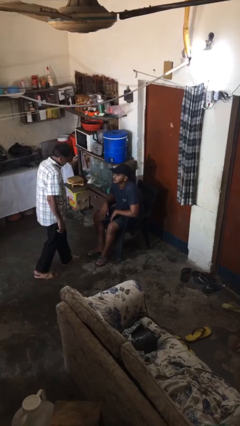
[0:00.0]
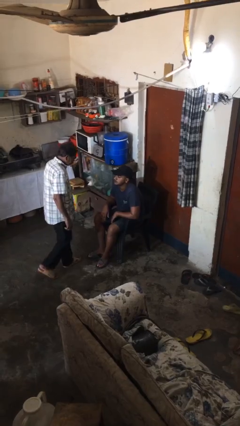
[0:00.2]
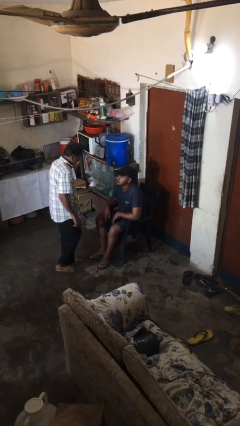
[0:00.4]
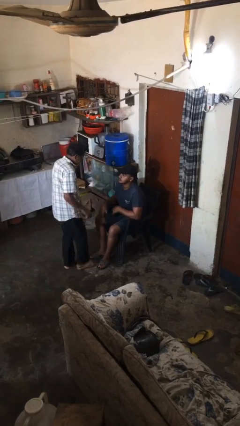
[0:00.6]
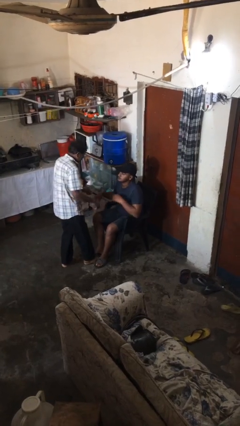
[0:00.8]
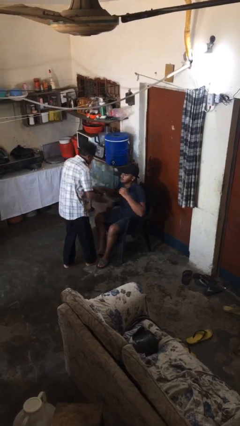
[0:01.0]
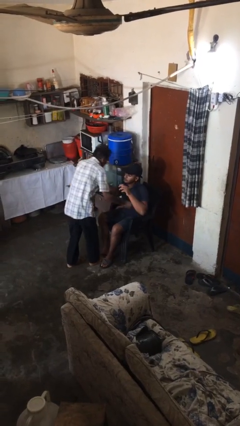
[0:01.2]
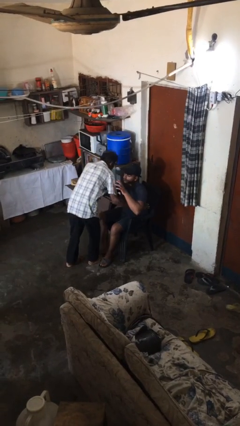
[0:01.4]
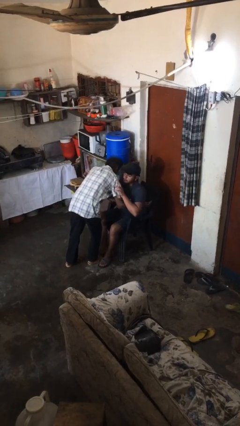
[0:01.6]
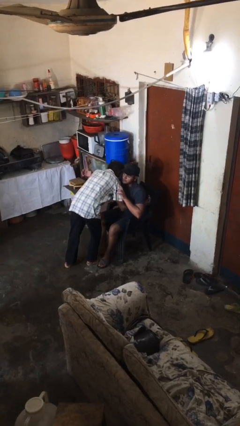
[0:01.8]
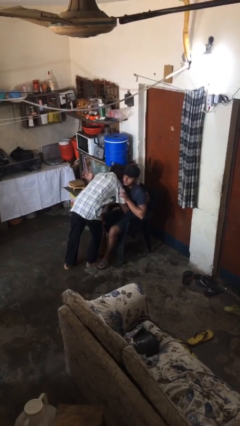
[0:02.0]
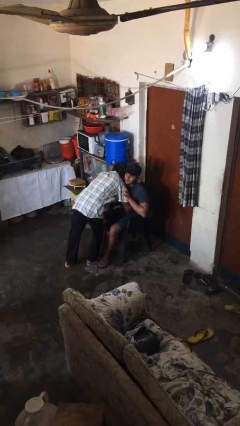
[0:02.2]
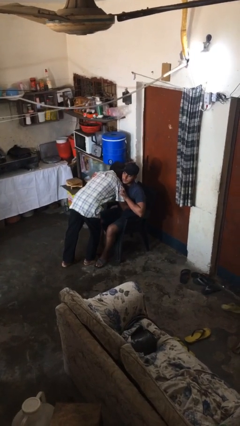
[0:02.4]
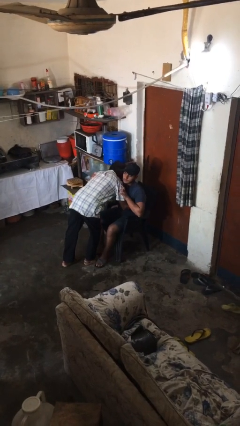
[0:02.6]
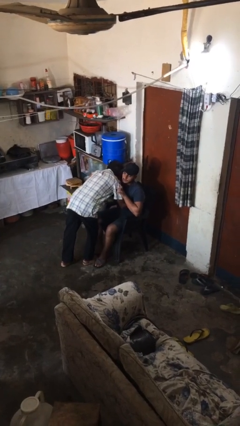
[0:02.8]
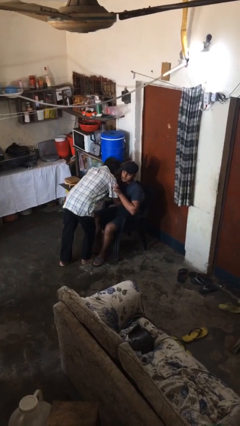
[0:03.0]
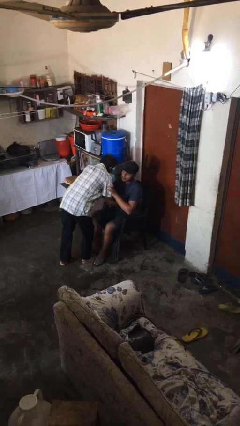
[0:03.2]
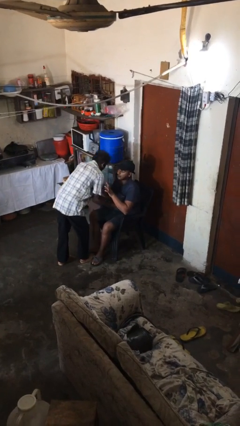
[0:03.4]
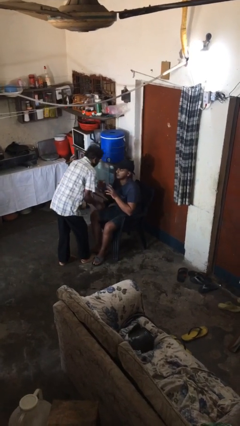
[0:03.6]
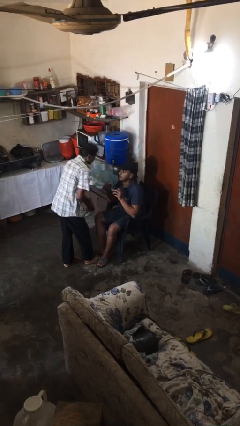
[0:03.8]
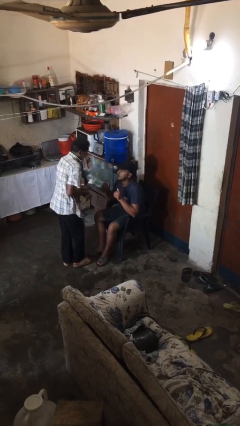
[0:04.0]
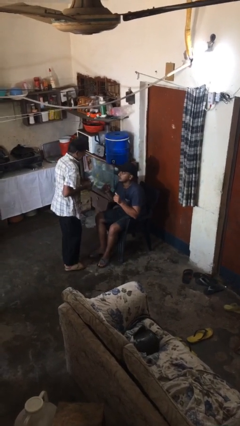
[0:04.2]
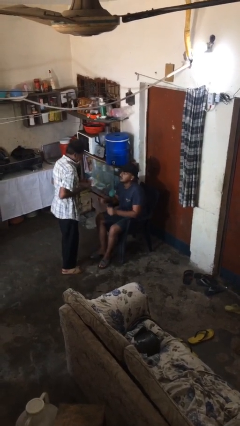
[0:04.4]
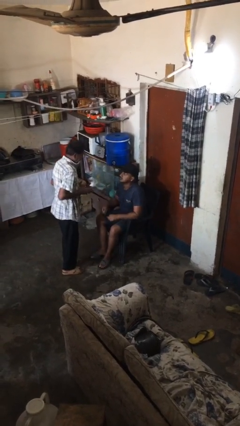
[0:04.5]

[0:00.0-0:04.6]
person embraces person

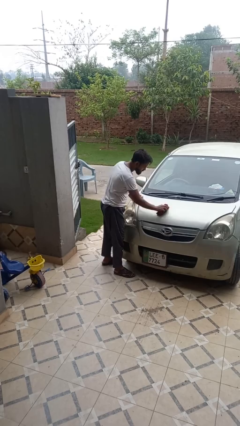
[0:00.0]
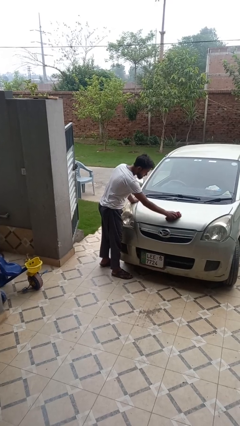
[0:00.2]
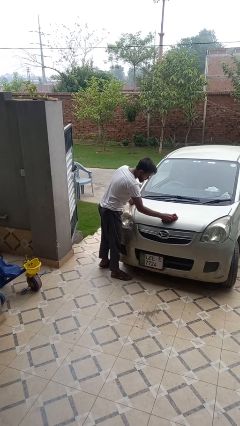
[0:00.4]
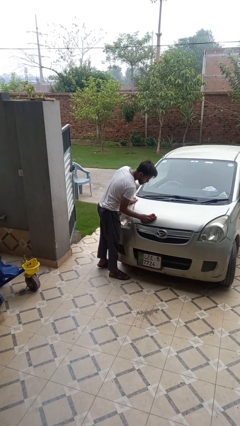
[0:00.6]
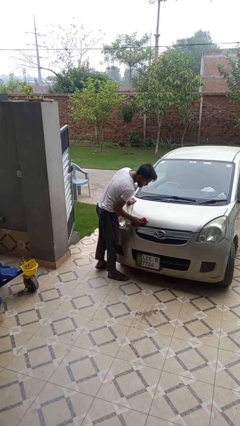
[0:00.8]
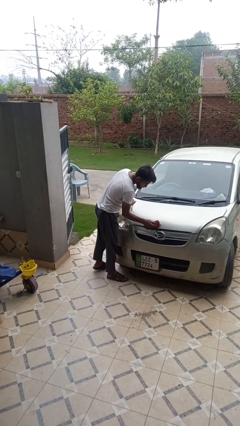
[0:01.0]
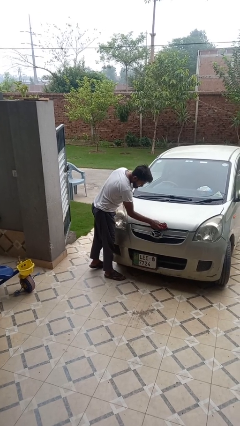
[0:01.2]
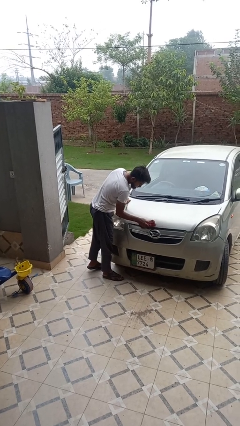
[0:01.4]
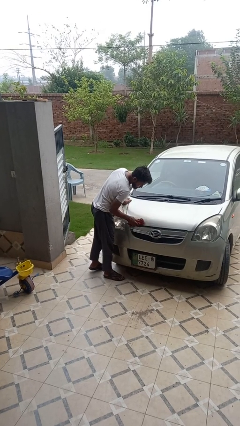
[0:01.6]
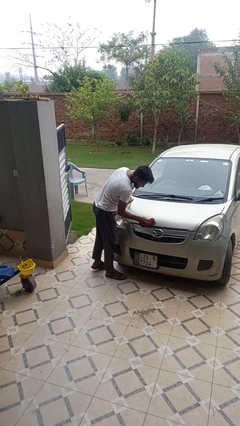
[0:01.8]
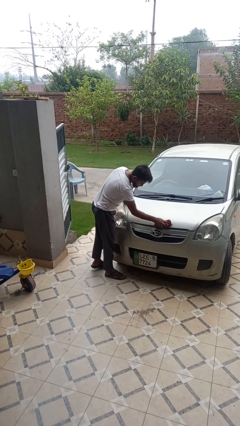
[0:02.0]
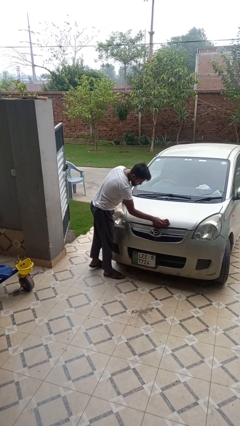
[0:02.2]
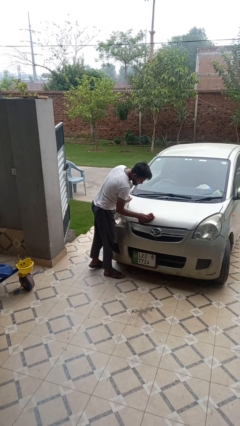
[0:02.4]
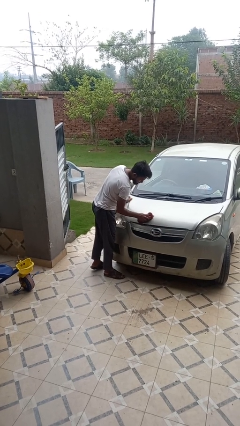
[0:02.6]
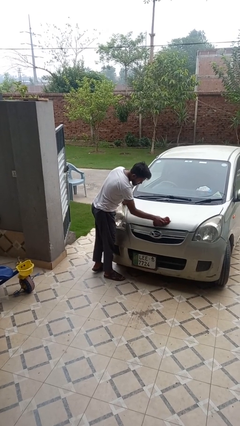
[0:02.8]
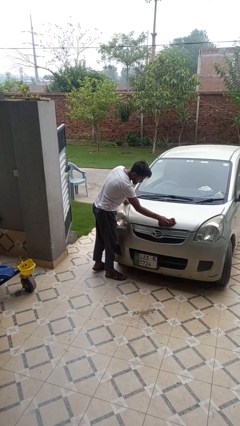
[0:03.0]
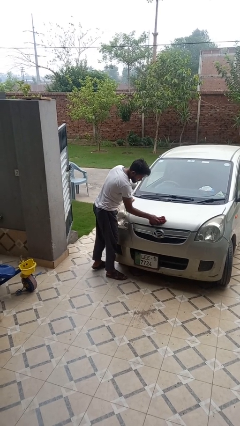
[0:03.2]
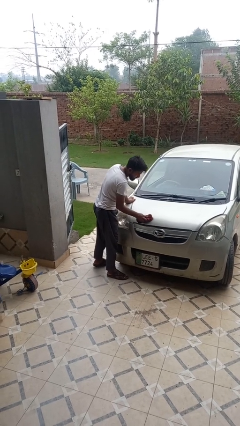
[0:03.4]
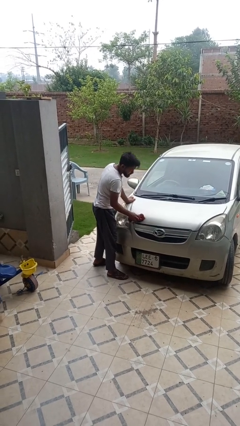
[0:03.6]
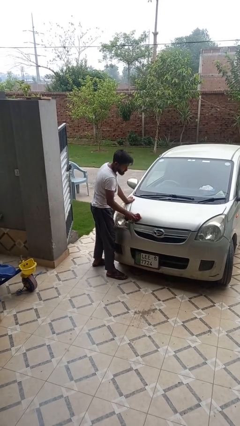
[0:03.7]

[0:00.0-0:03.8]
person polishes car with rag

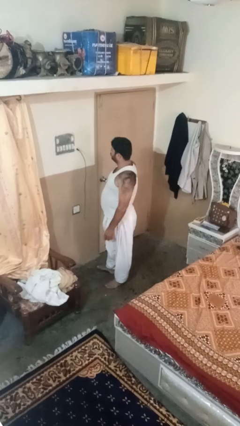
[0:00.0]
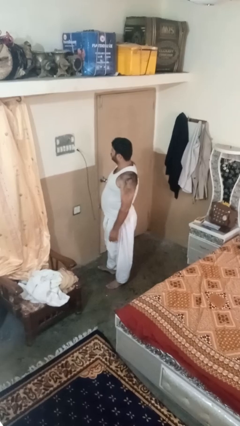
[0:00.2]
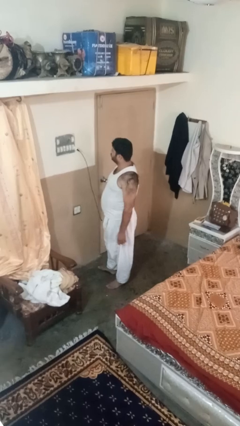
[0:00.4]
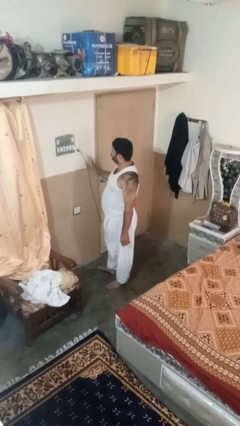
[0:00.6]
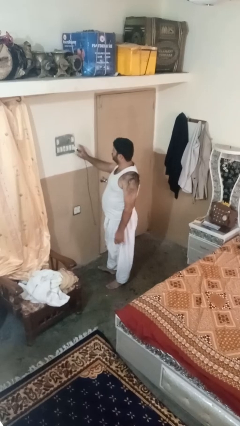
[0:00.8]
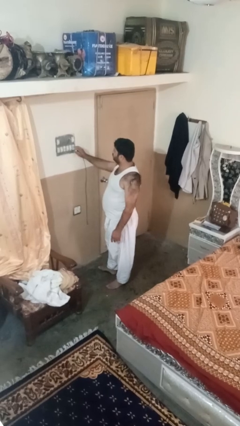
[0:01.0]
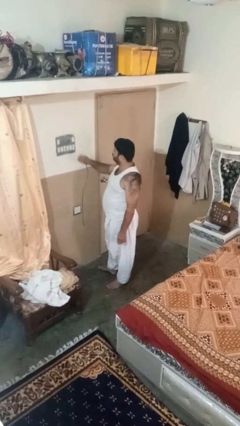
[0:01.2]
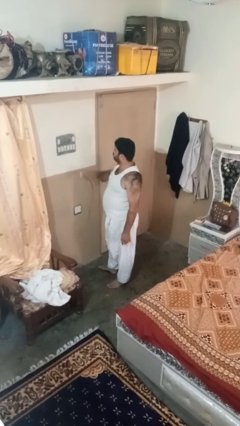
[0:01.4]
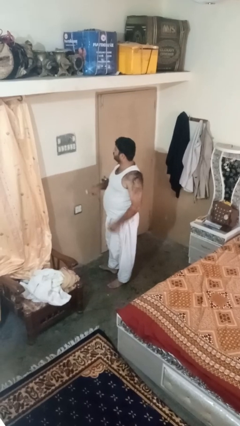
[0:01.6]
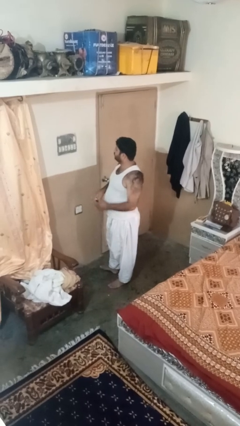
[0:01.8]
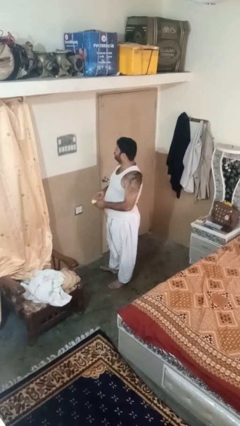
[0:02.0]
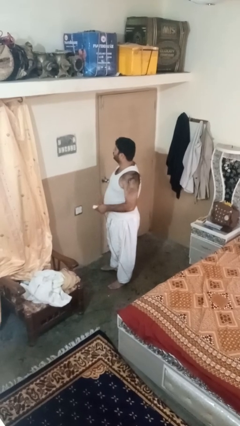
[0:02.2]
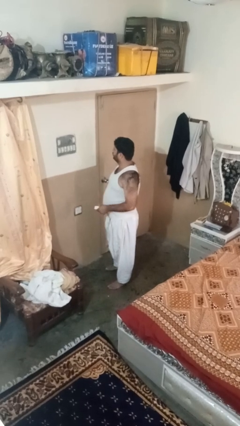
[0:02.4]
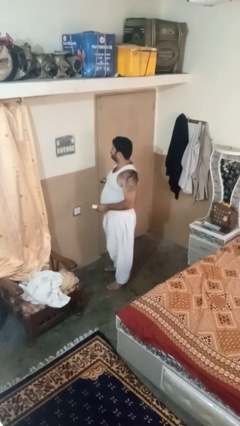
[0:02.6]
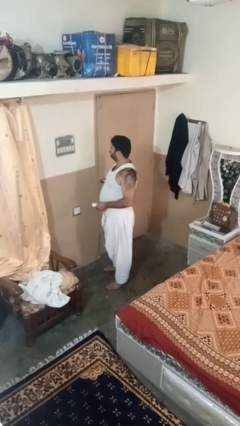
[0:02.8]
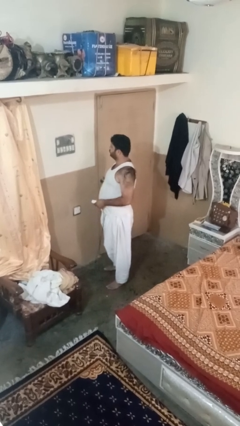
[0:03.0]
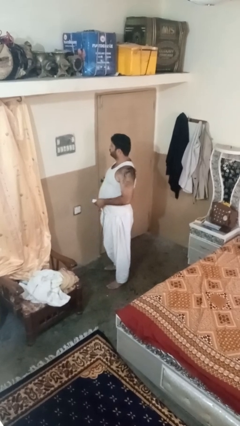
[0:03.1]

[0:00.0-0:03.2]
person unplugs from electrical socket

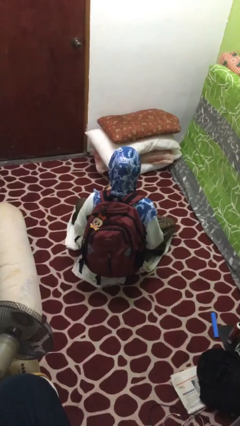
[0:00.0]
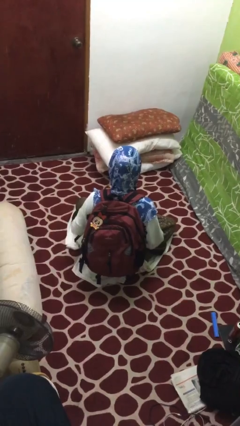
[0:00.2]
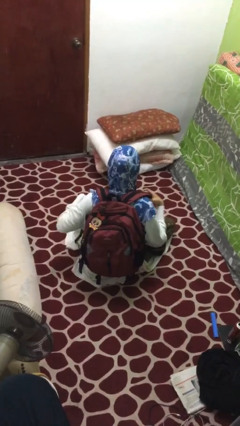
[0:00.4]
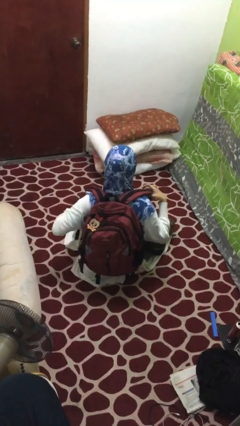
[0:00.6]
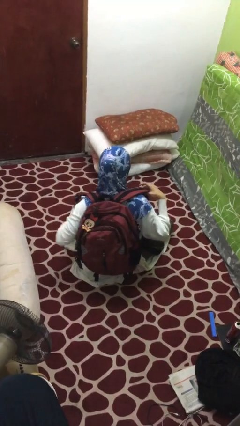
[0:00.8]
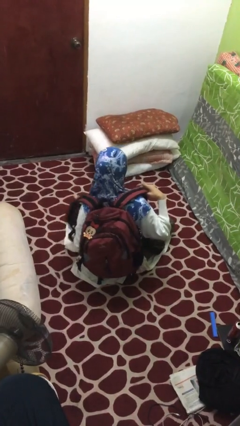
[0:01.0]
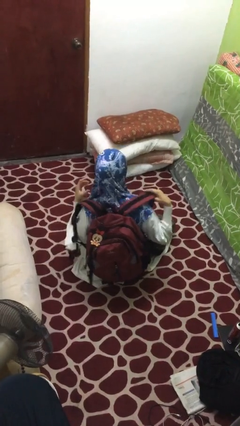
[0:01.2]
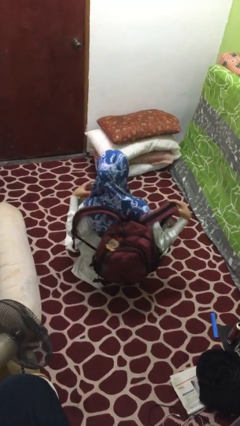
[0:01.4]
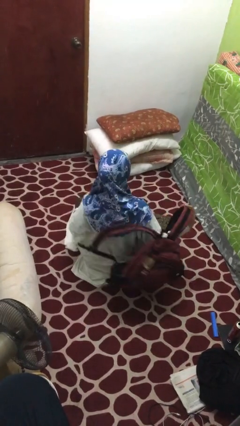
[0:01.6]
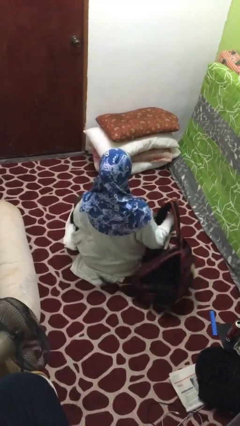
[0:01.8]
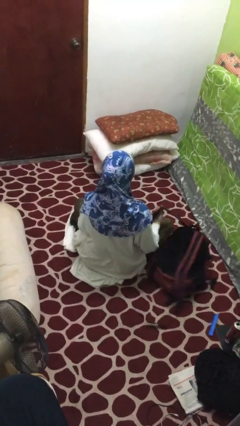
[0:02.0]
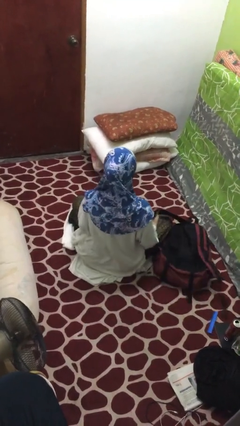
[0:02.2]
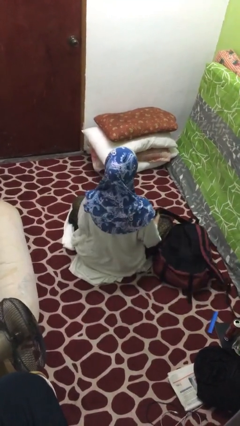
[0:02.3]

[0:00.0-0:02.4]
person takes off backpack

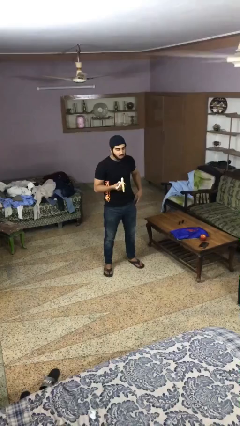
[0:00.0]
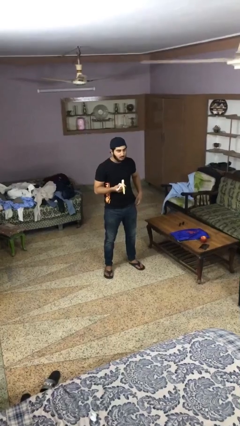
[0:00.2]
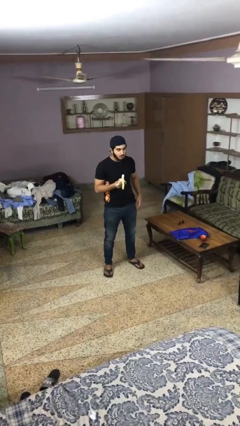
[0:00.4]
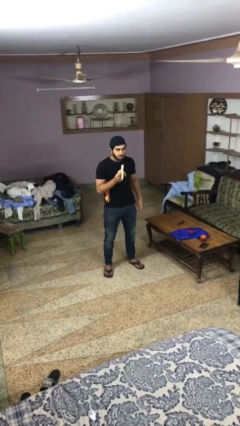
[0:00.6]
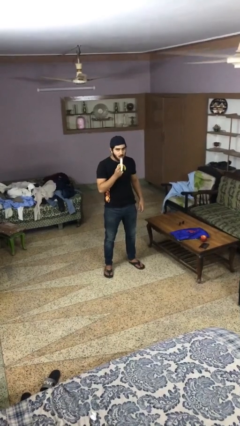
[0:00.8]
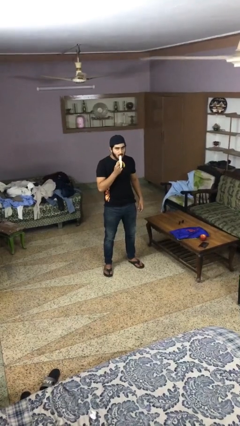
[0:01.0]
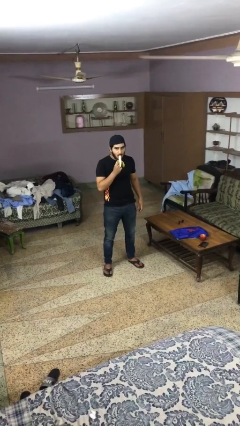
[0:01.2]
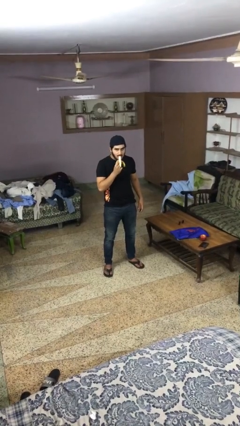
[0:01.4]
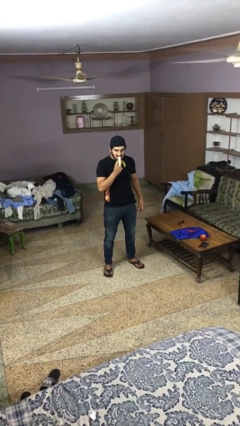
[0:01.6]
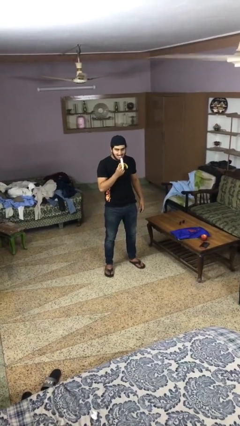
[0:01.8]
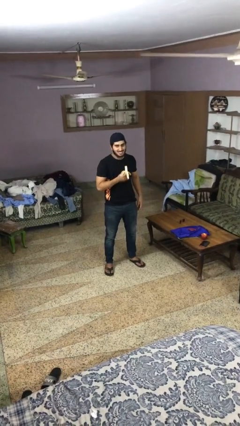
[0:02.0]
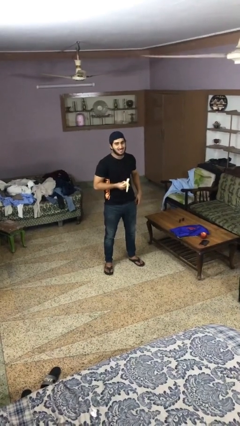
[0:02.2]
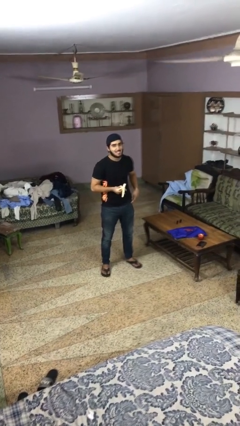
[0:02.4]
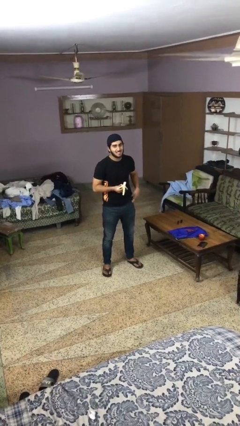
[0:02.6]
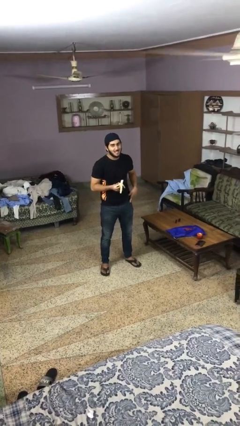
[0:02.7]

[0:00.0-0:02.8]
person eats banana

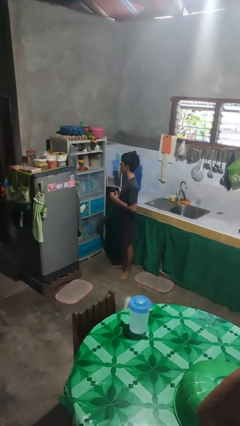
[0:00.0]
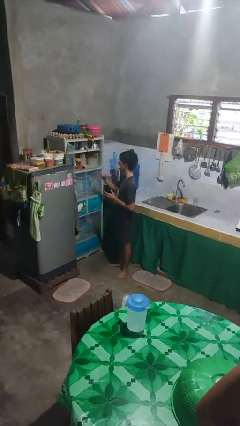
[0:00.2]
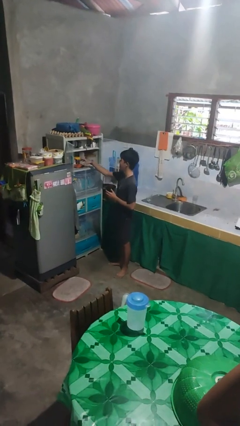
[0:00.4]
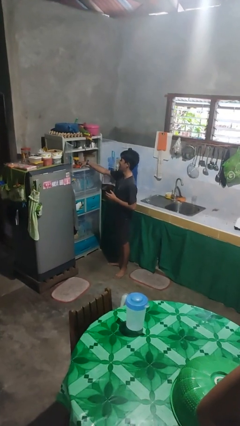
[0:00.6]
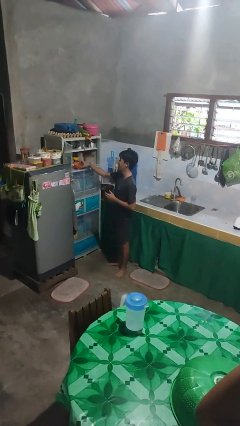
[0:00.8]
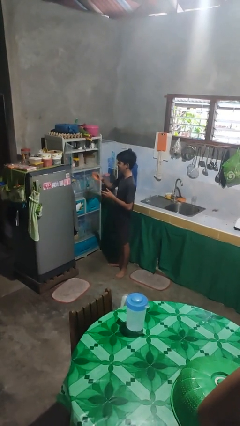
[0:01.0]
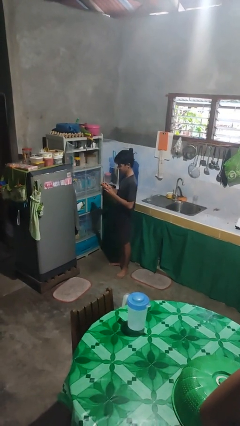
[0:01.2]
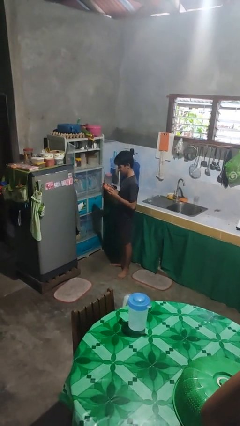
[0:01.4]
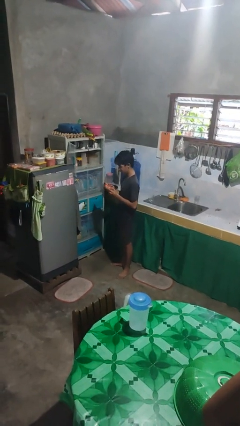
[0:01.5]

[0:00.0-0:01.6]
person takes object from cabinet
